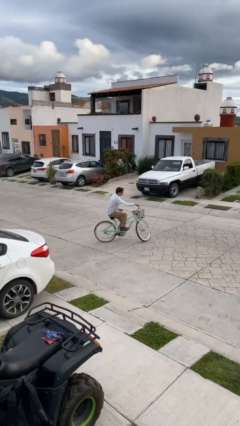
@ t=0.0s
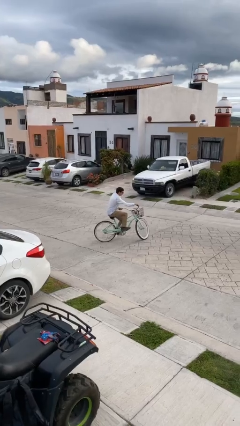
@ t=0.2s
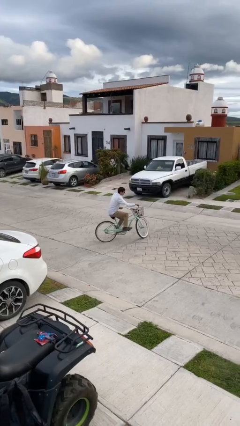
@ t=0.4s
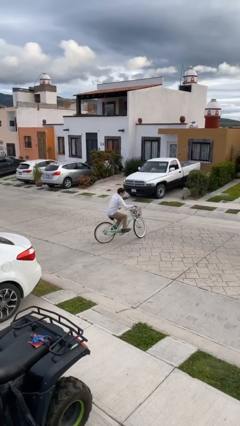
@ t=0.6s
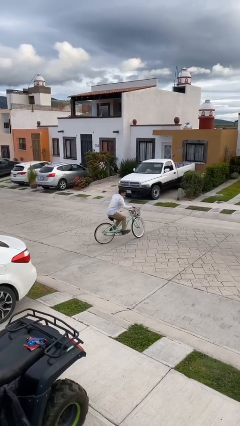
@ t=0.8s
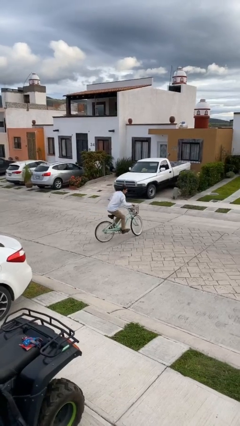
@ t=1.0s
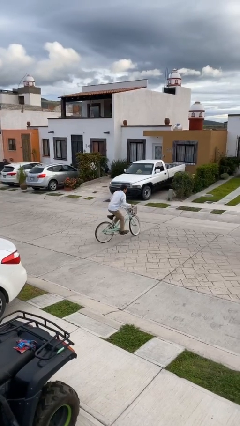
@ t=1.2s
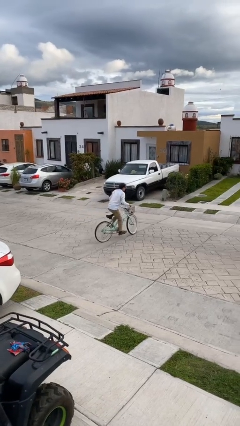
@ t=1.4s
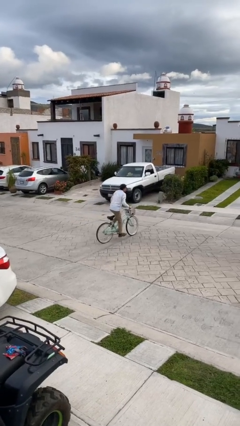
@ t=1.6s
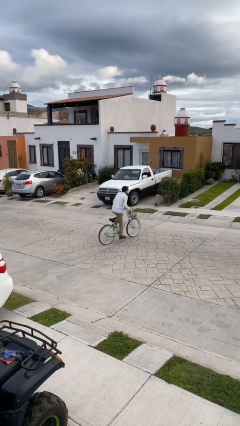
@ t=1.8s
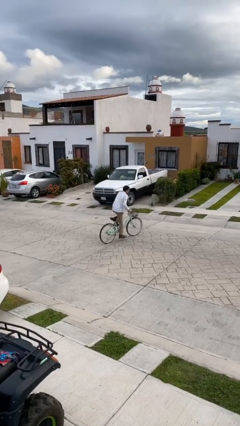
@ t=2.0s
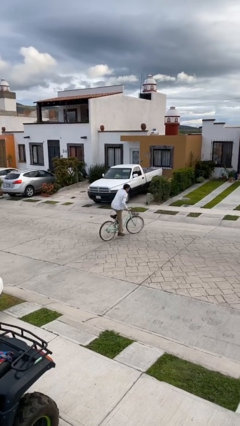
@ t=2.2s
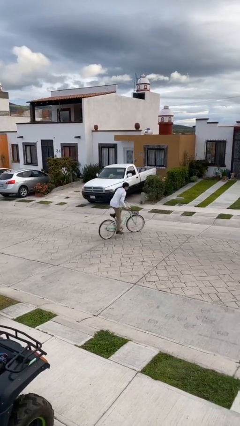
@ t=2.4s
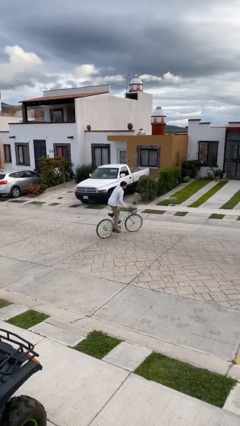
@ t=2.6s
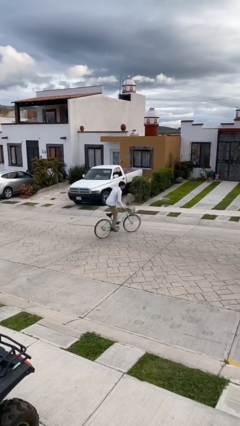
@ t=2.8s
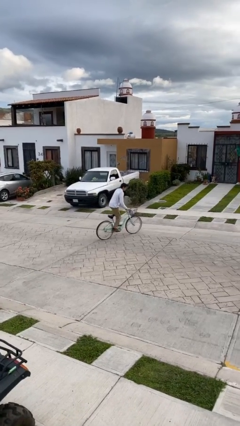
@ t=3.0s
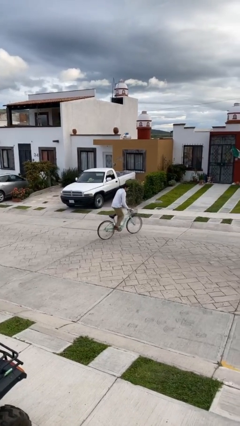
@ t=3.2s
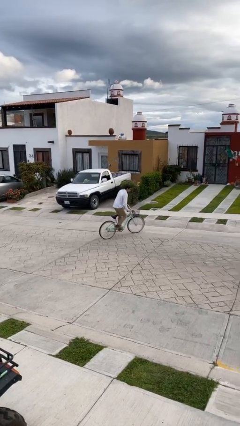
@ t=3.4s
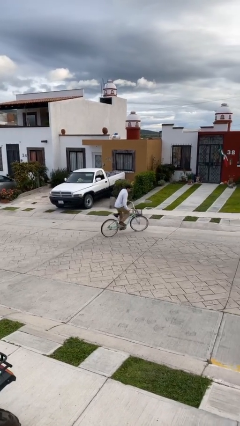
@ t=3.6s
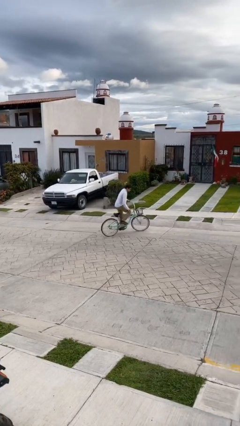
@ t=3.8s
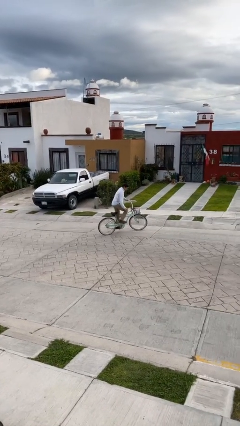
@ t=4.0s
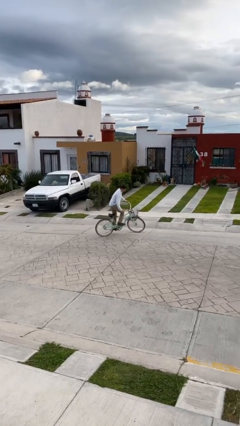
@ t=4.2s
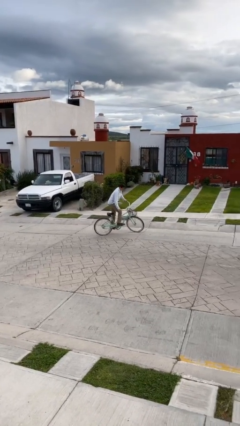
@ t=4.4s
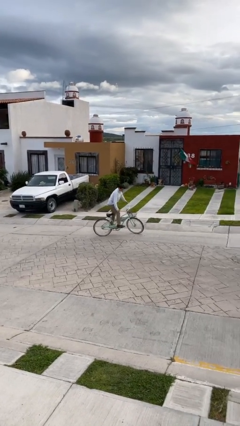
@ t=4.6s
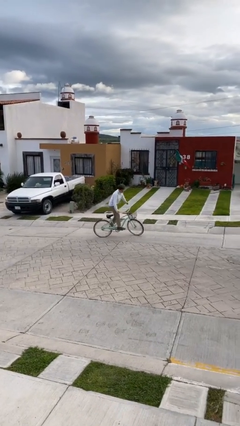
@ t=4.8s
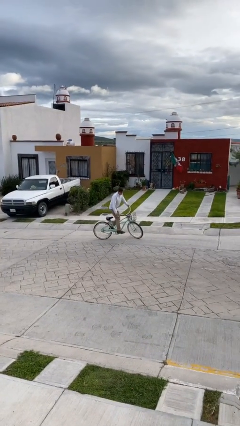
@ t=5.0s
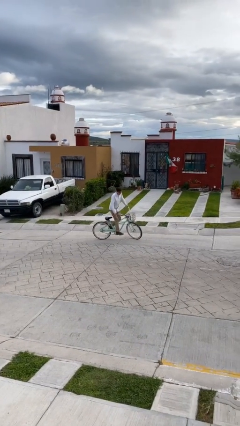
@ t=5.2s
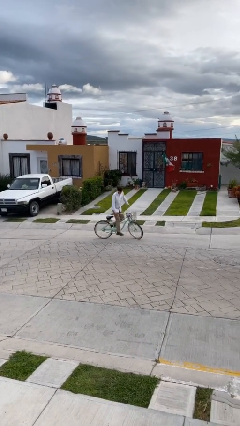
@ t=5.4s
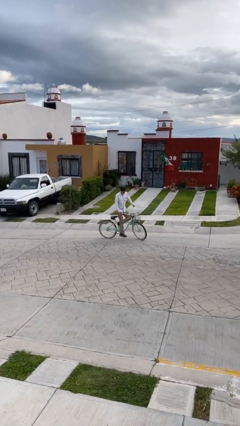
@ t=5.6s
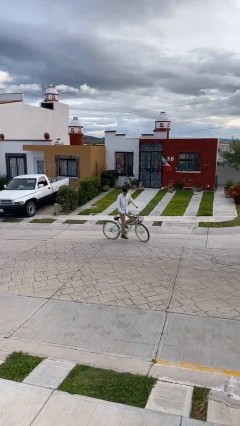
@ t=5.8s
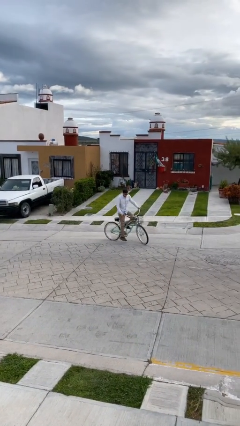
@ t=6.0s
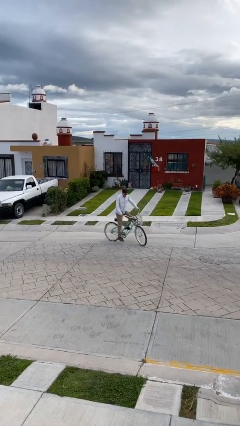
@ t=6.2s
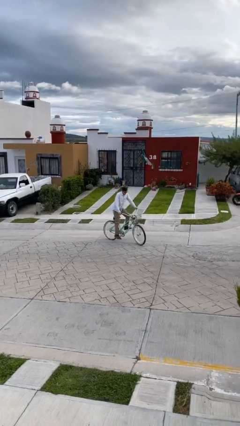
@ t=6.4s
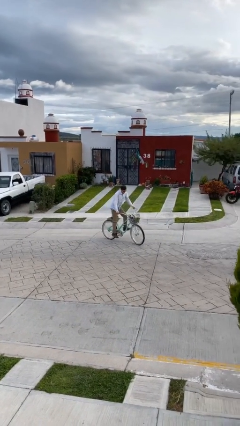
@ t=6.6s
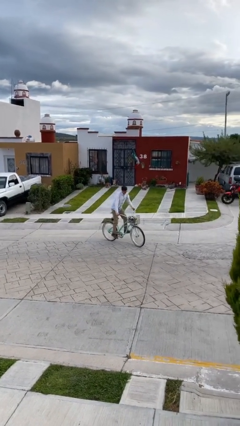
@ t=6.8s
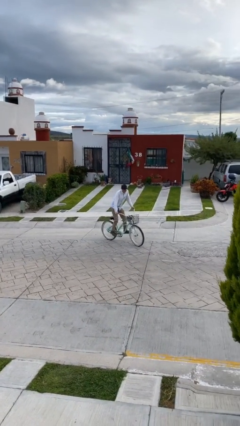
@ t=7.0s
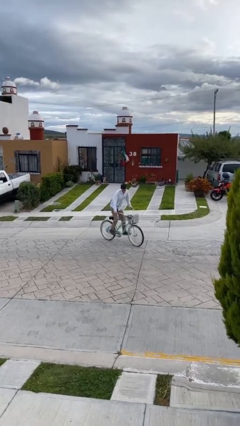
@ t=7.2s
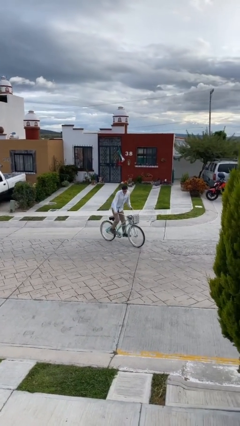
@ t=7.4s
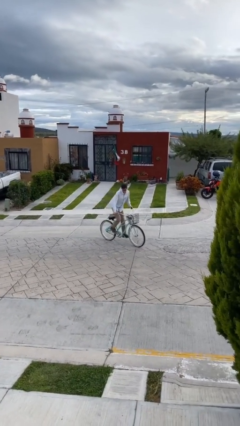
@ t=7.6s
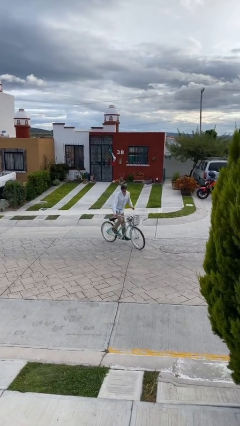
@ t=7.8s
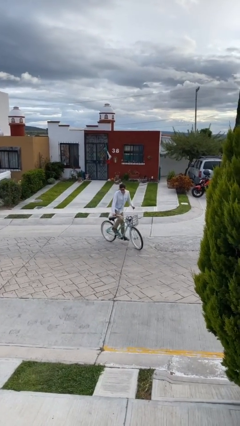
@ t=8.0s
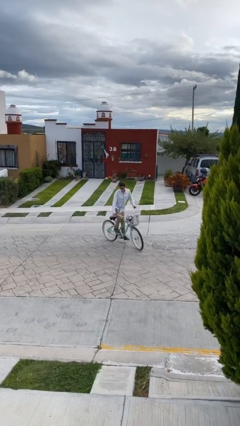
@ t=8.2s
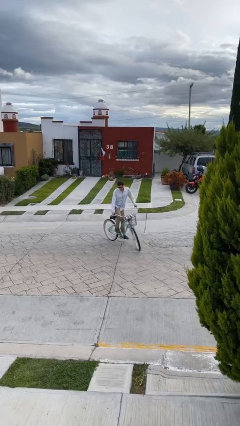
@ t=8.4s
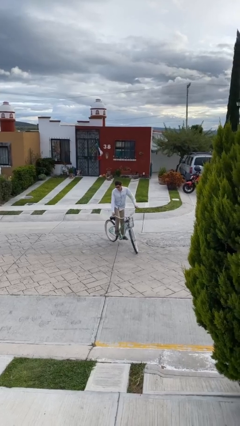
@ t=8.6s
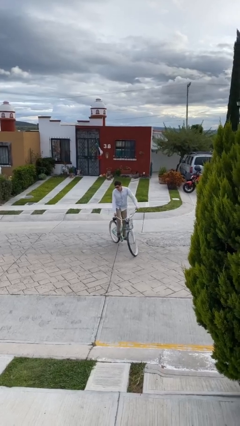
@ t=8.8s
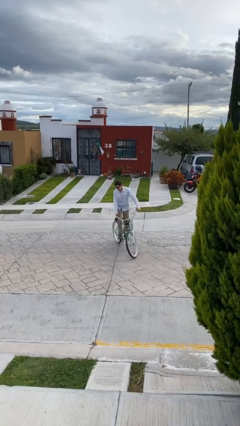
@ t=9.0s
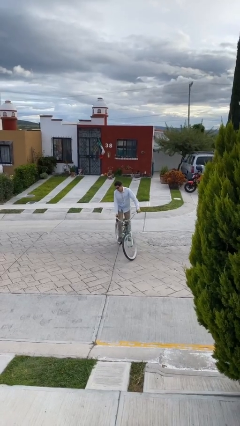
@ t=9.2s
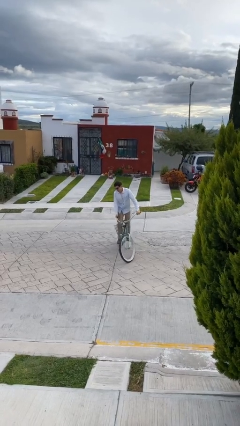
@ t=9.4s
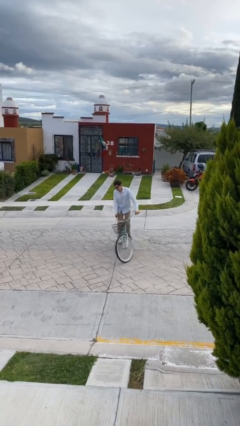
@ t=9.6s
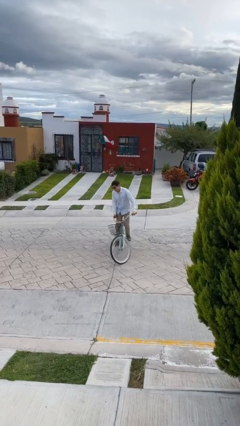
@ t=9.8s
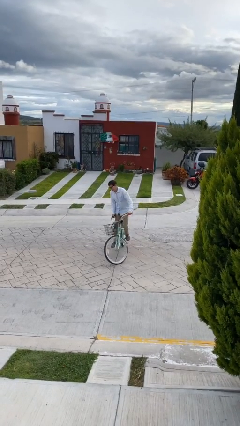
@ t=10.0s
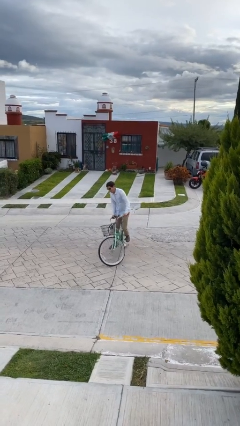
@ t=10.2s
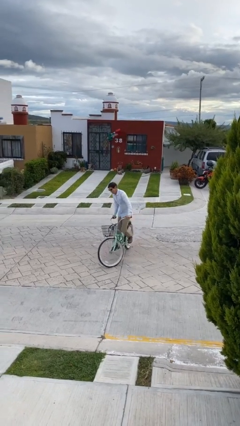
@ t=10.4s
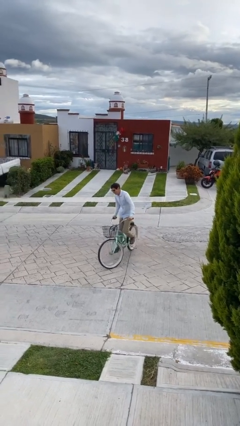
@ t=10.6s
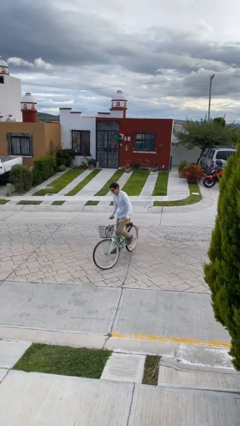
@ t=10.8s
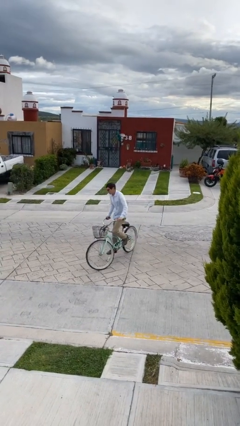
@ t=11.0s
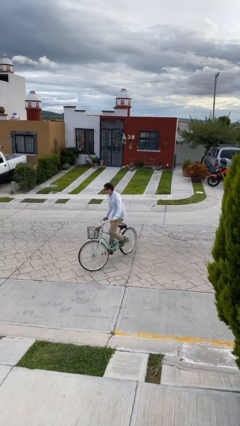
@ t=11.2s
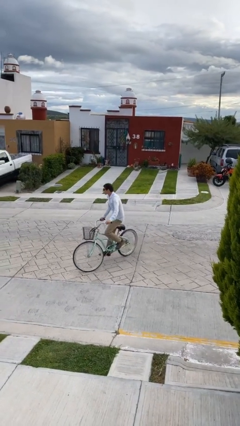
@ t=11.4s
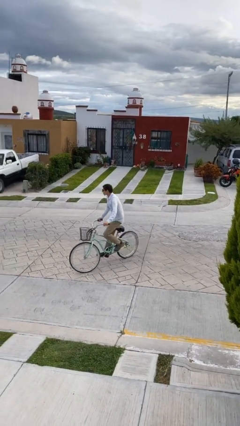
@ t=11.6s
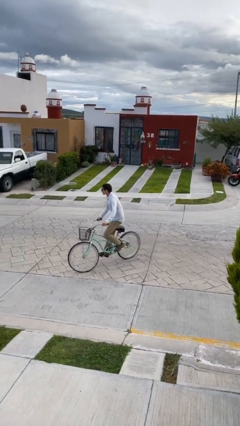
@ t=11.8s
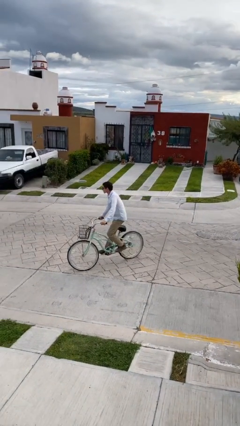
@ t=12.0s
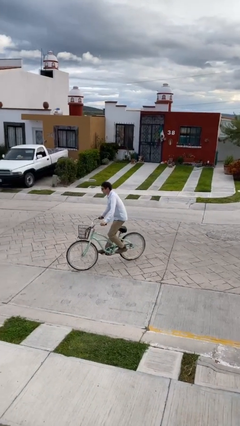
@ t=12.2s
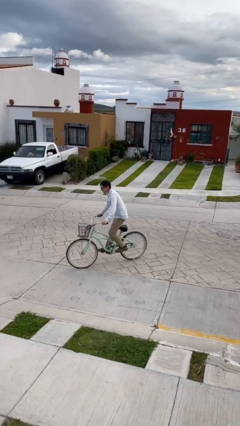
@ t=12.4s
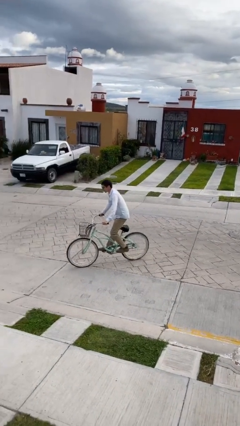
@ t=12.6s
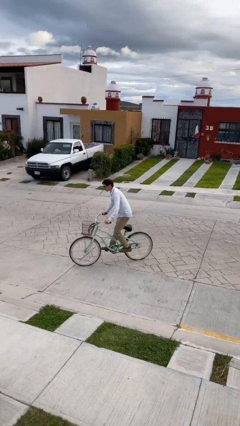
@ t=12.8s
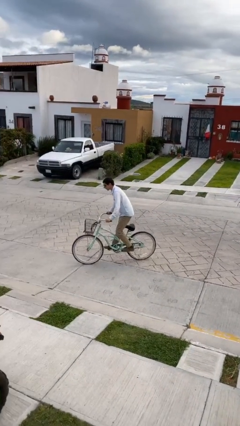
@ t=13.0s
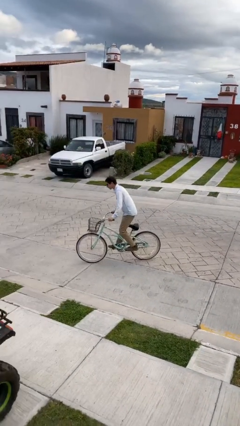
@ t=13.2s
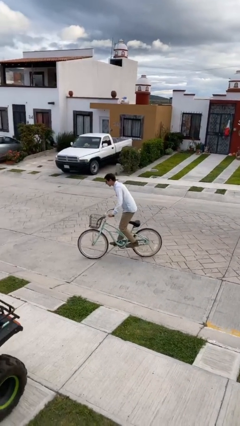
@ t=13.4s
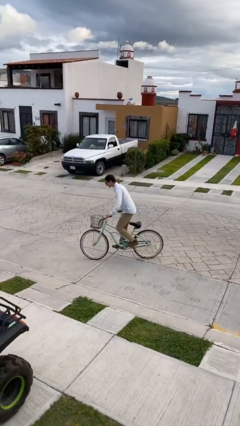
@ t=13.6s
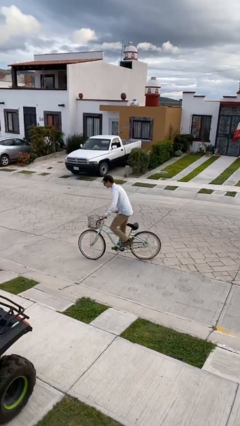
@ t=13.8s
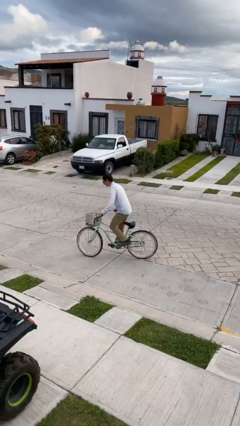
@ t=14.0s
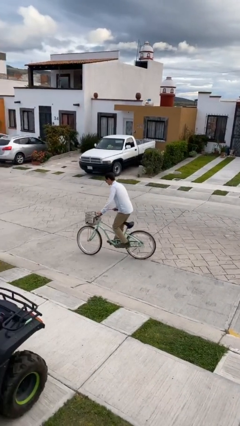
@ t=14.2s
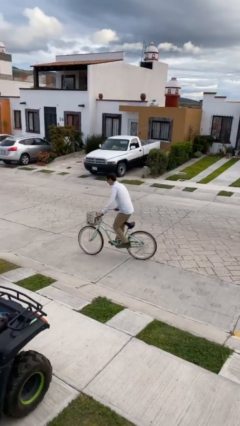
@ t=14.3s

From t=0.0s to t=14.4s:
person rides bicycle

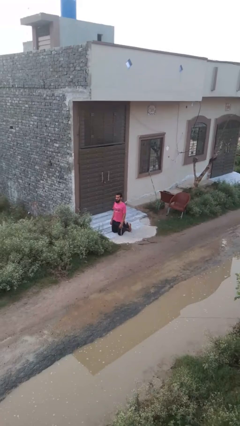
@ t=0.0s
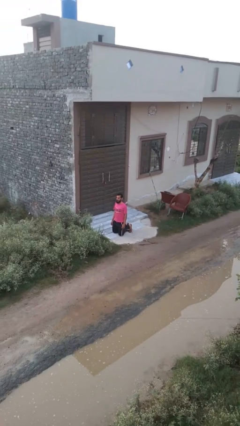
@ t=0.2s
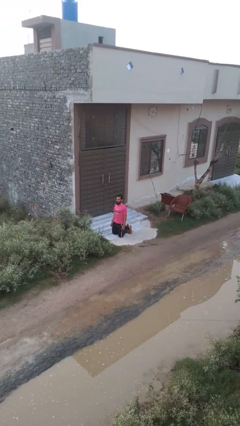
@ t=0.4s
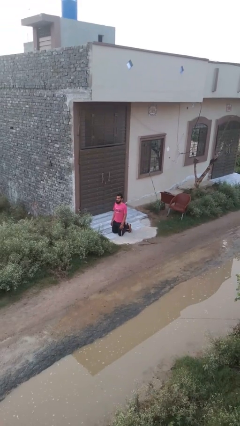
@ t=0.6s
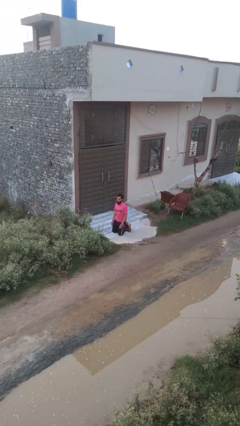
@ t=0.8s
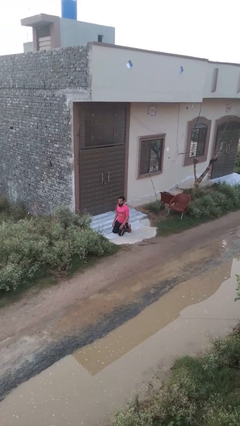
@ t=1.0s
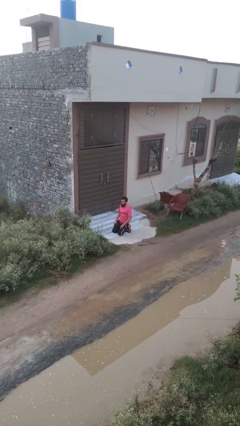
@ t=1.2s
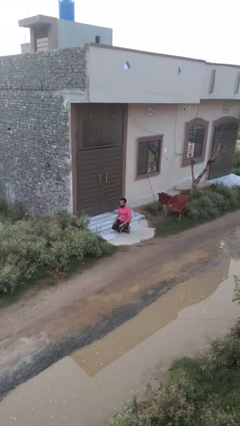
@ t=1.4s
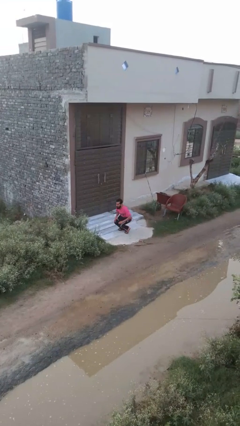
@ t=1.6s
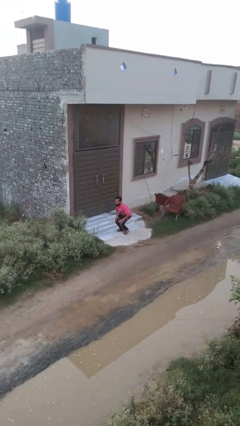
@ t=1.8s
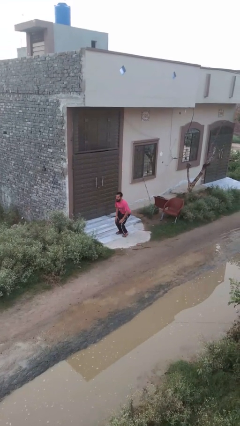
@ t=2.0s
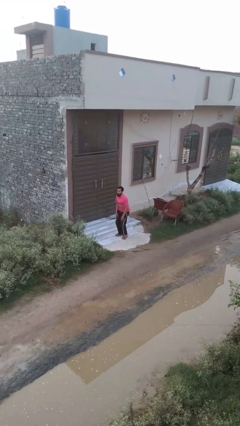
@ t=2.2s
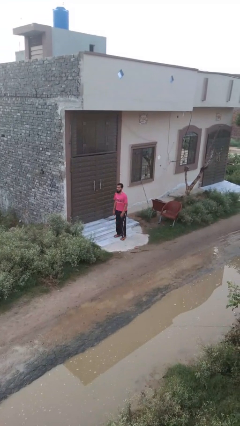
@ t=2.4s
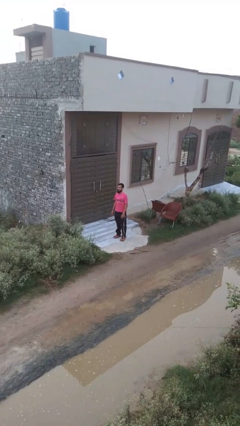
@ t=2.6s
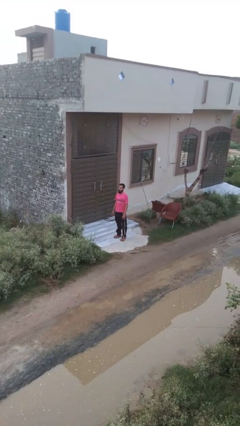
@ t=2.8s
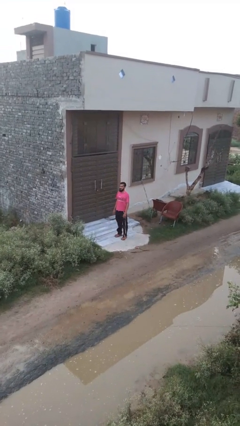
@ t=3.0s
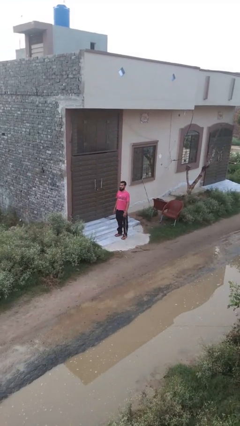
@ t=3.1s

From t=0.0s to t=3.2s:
person stands up from floor

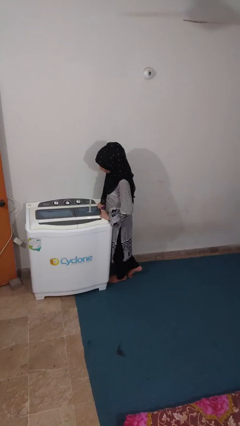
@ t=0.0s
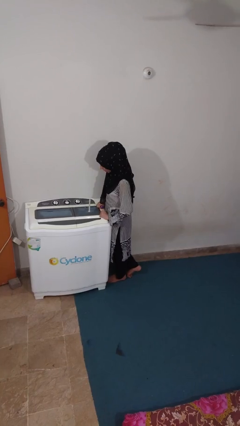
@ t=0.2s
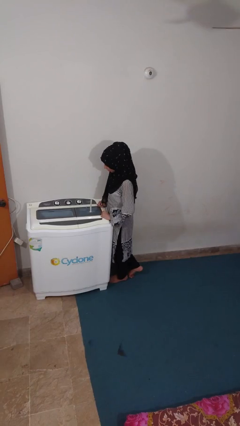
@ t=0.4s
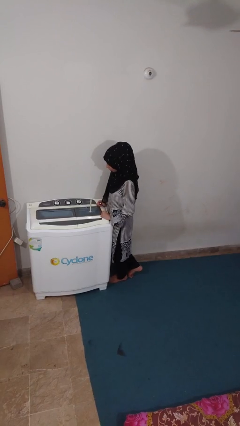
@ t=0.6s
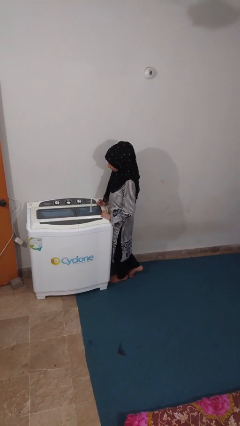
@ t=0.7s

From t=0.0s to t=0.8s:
person extinguishes candle
